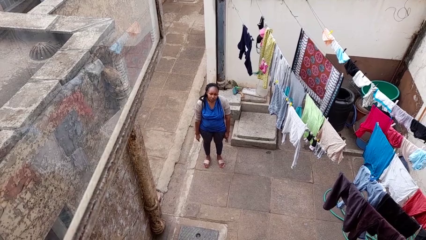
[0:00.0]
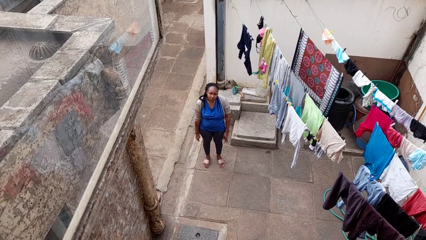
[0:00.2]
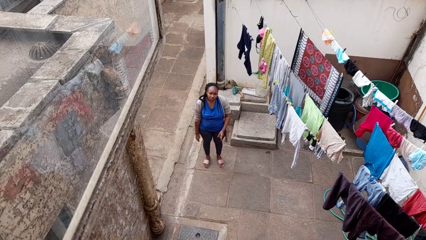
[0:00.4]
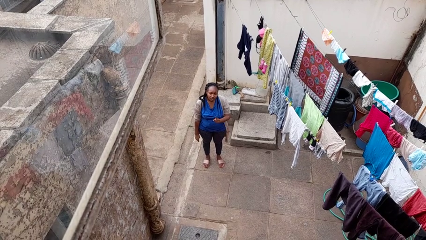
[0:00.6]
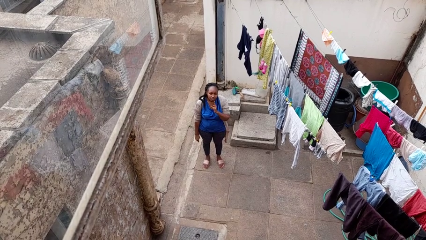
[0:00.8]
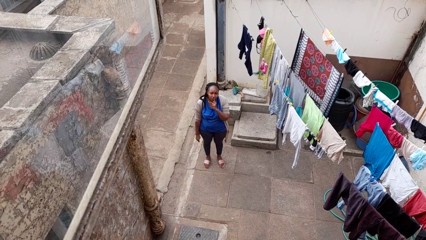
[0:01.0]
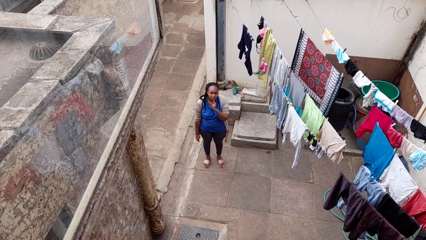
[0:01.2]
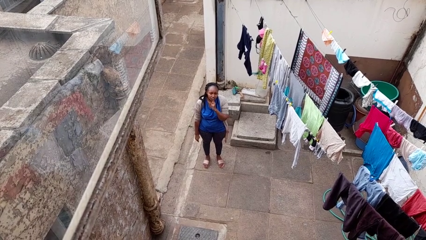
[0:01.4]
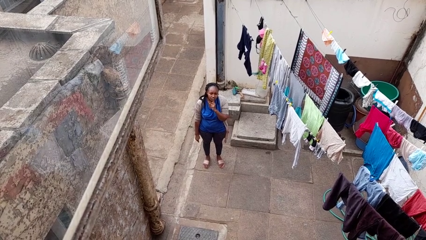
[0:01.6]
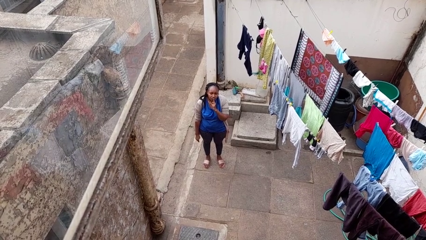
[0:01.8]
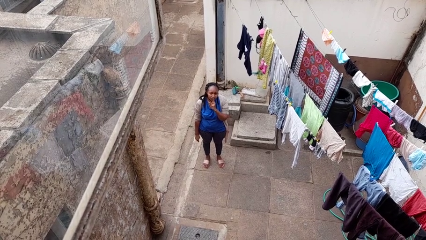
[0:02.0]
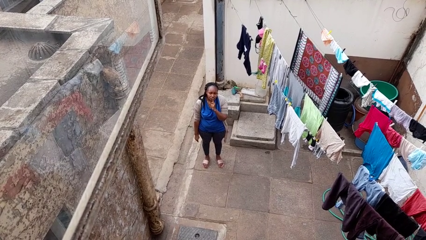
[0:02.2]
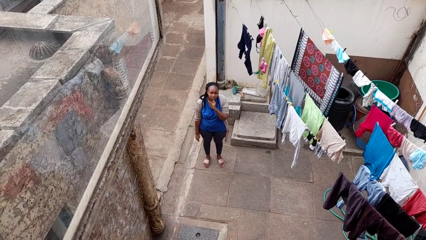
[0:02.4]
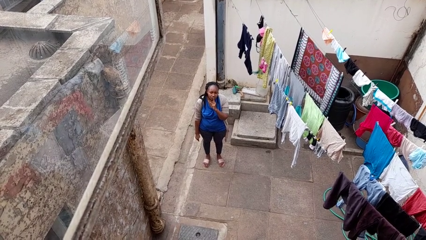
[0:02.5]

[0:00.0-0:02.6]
person gestures be quiet

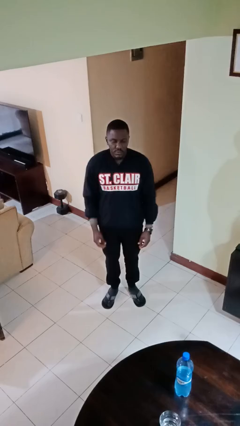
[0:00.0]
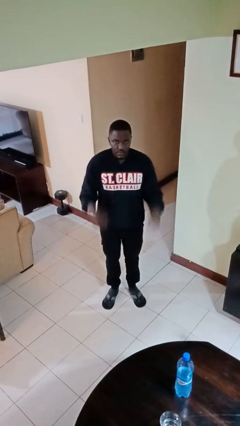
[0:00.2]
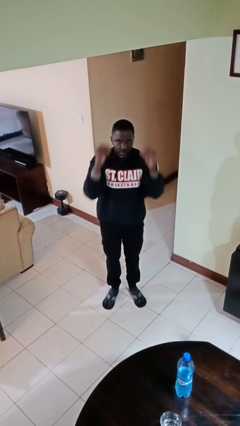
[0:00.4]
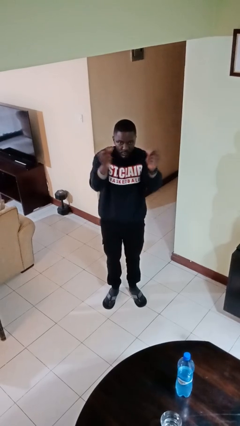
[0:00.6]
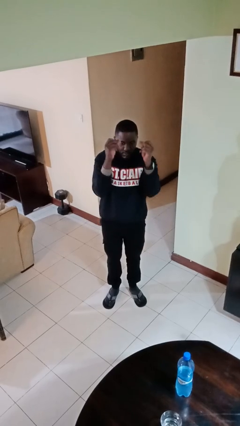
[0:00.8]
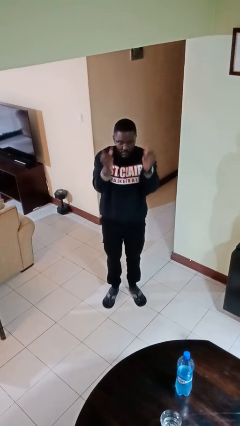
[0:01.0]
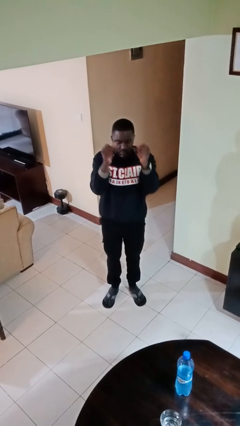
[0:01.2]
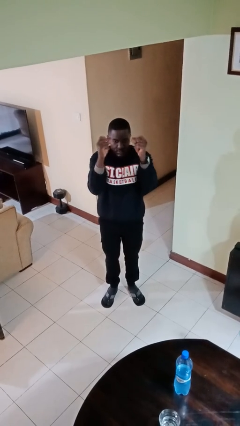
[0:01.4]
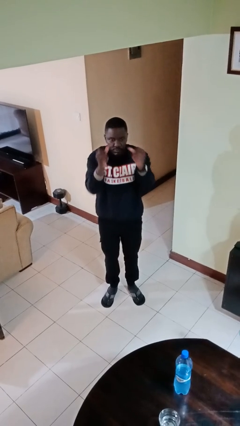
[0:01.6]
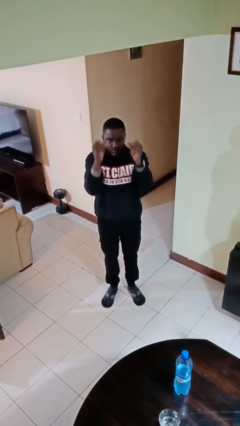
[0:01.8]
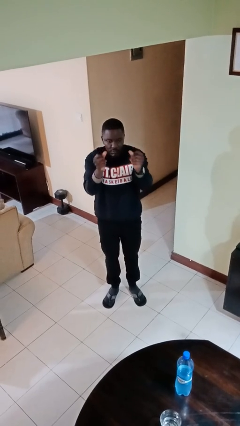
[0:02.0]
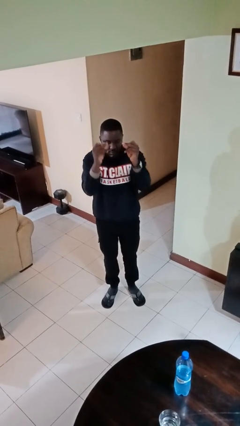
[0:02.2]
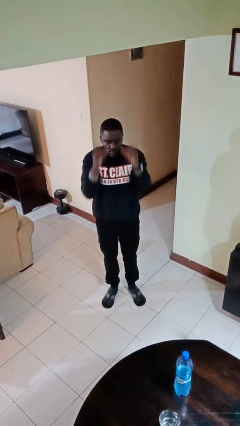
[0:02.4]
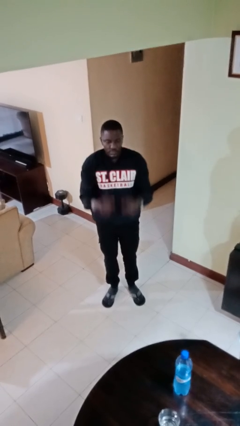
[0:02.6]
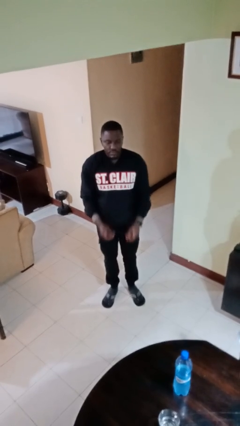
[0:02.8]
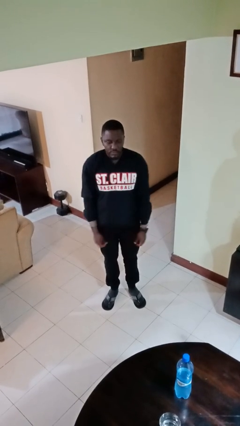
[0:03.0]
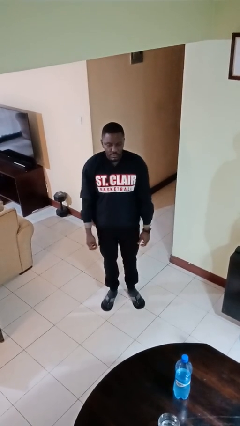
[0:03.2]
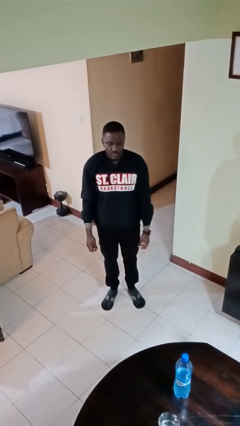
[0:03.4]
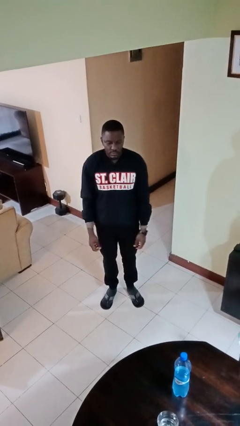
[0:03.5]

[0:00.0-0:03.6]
person snaps fingers

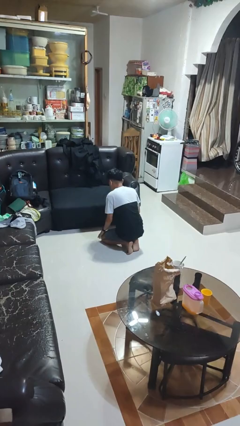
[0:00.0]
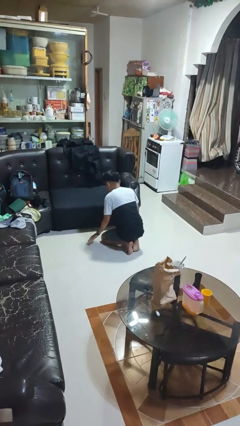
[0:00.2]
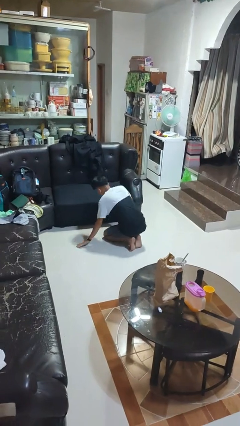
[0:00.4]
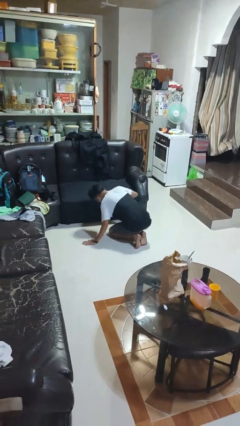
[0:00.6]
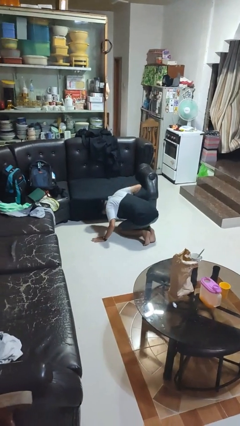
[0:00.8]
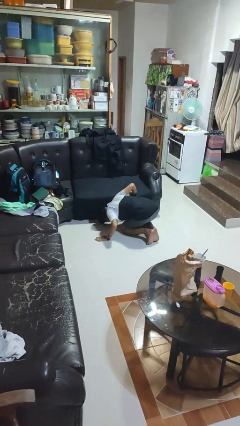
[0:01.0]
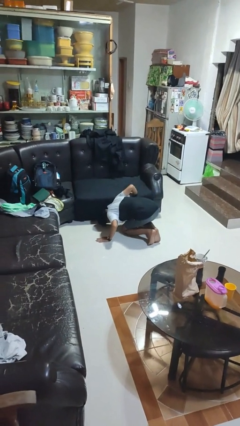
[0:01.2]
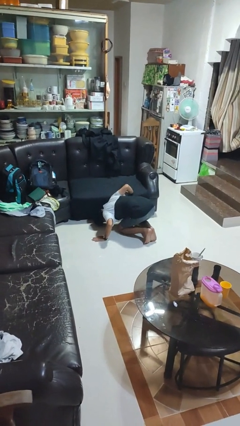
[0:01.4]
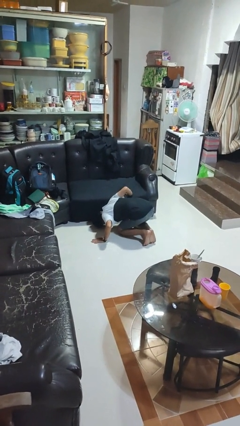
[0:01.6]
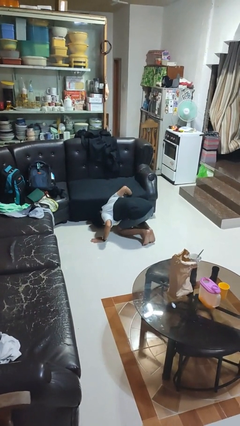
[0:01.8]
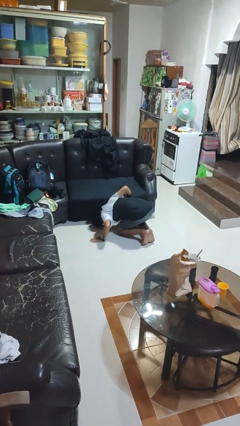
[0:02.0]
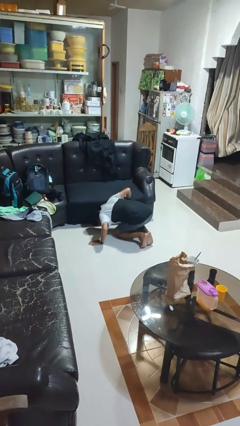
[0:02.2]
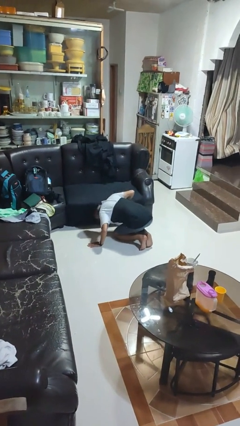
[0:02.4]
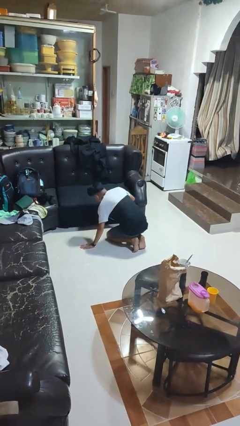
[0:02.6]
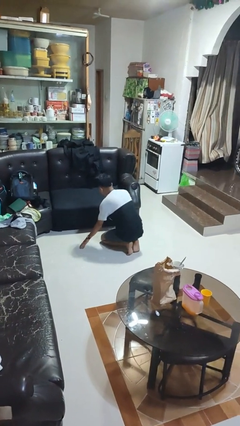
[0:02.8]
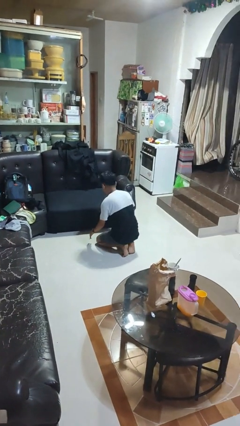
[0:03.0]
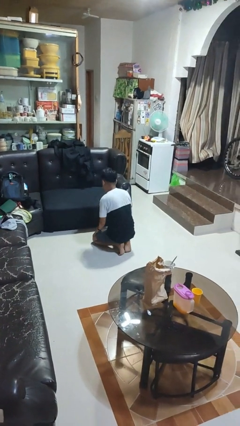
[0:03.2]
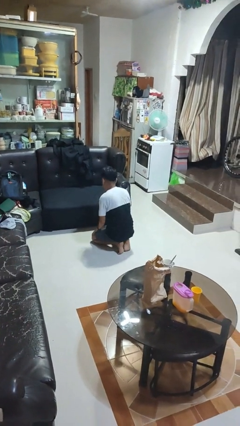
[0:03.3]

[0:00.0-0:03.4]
person searches under couch

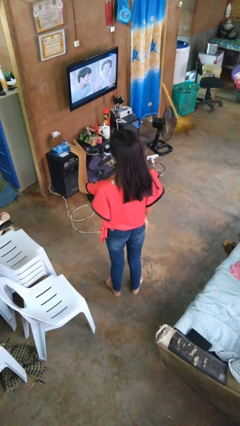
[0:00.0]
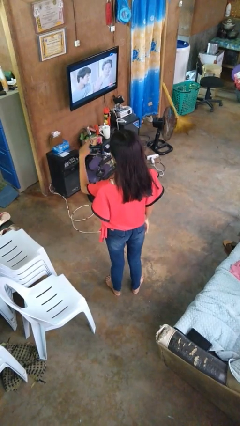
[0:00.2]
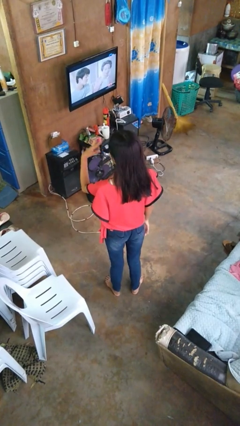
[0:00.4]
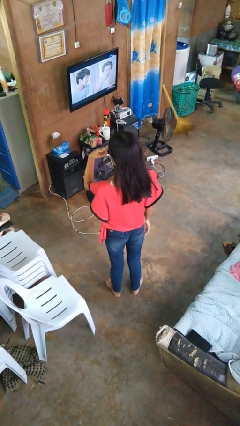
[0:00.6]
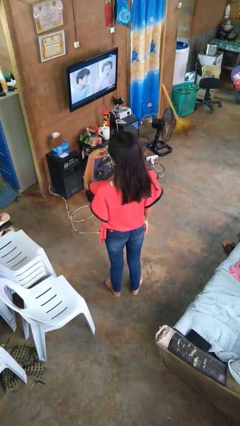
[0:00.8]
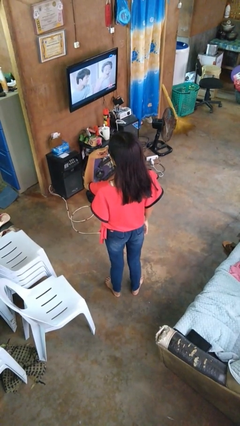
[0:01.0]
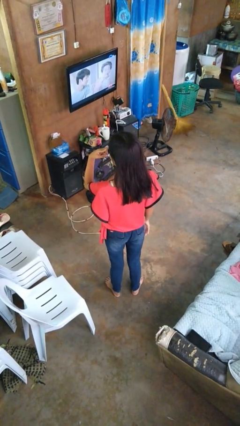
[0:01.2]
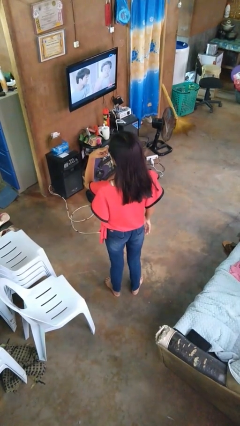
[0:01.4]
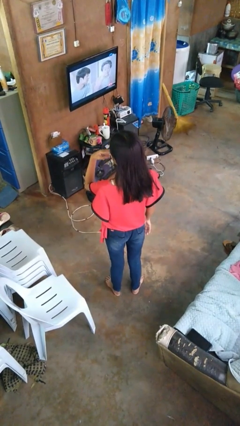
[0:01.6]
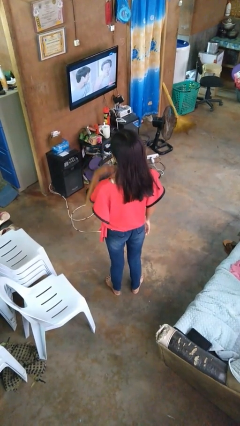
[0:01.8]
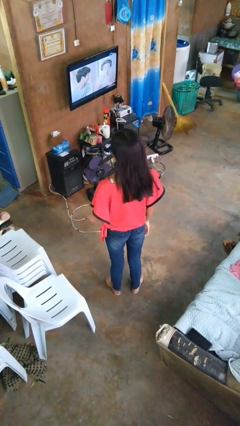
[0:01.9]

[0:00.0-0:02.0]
person gestures watch closely

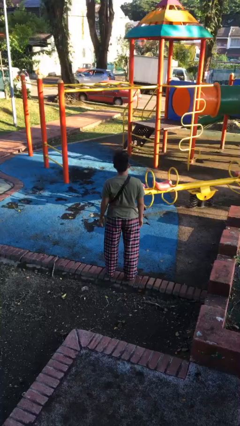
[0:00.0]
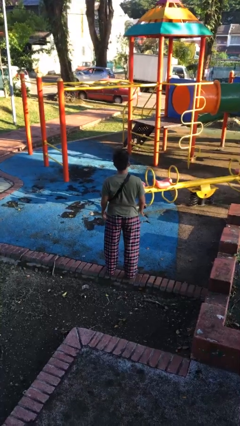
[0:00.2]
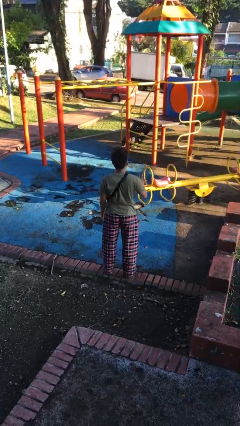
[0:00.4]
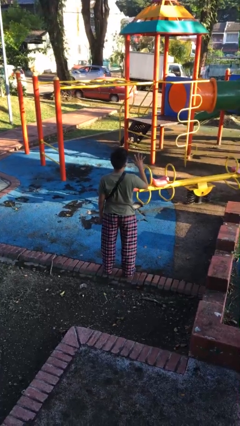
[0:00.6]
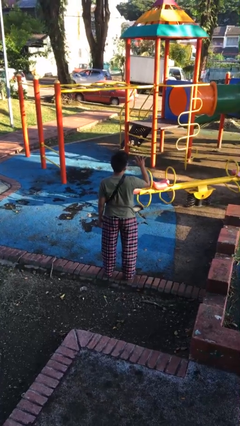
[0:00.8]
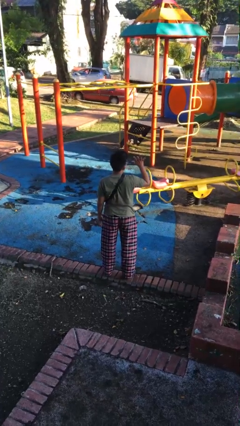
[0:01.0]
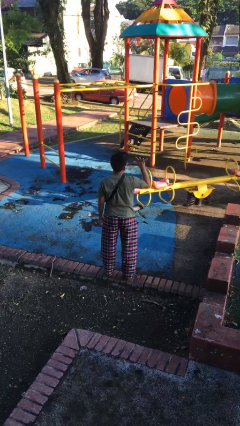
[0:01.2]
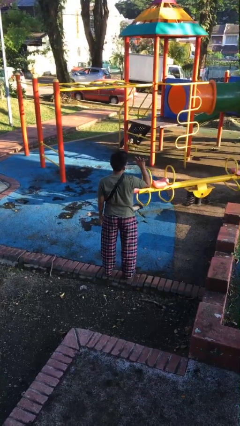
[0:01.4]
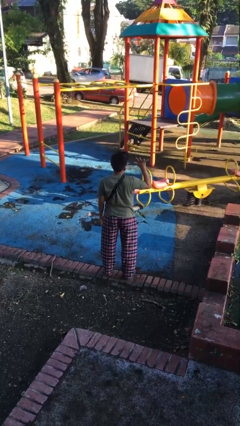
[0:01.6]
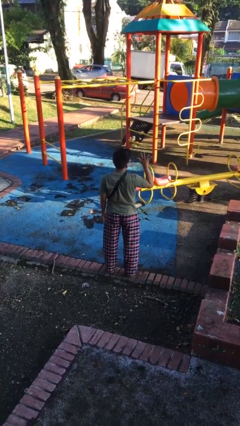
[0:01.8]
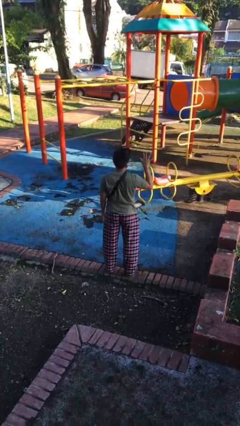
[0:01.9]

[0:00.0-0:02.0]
person gestures number five

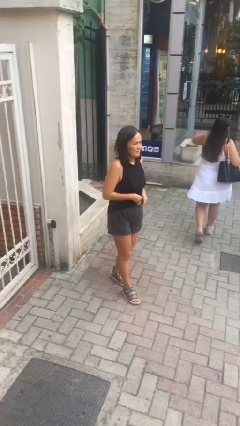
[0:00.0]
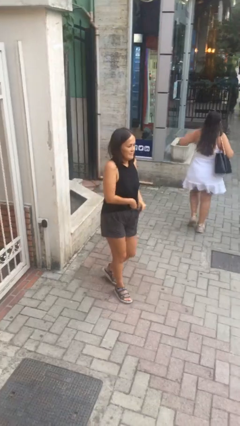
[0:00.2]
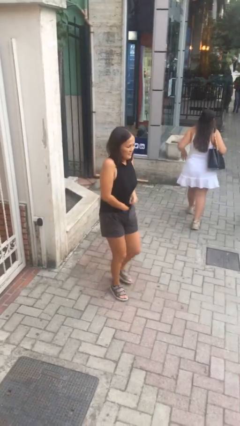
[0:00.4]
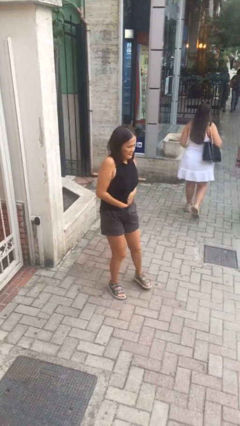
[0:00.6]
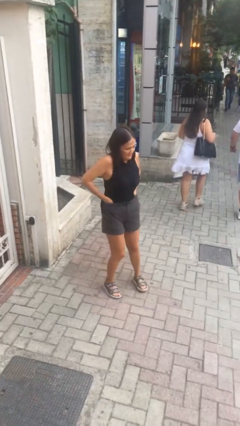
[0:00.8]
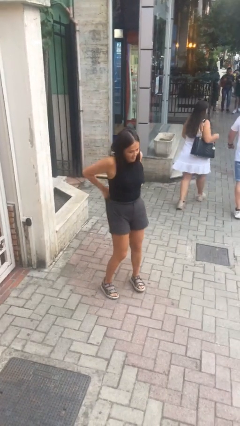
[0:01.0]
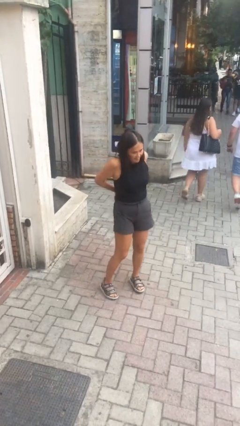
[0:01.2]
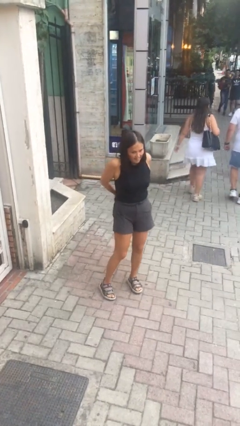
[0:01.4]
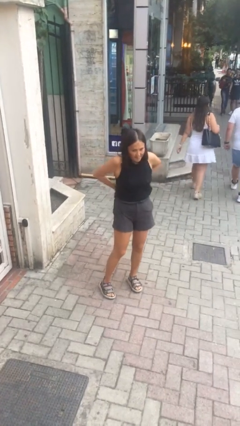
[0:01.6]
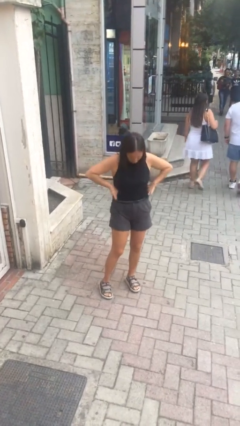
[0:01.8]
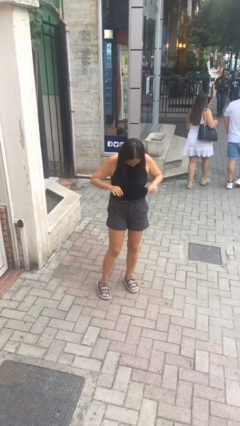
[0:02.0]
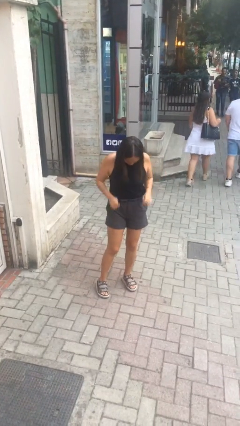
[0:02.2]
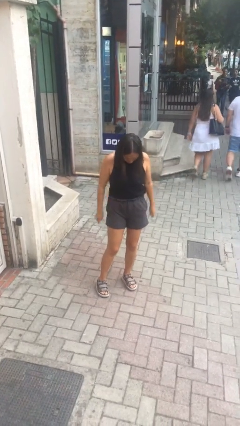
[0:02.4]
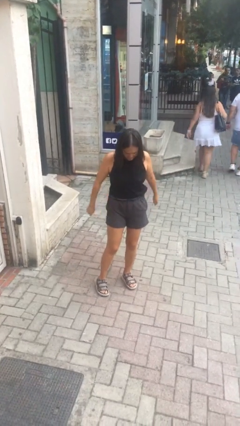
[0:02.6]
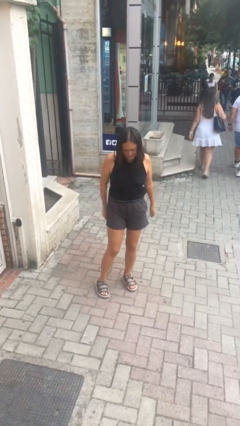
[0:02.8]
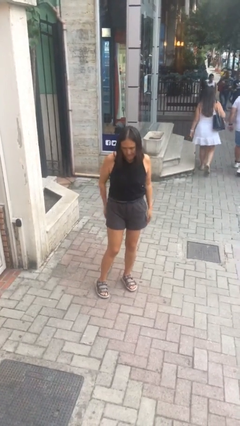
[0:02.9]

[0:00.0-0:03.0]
person tucks in shirt

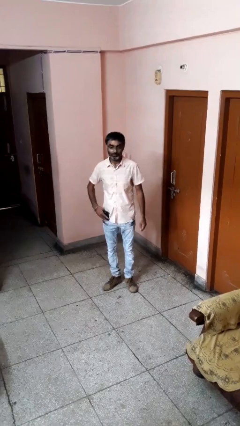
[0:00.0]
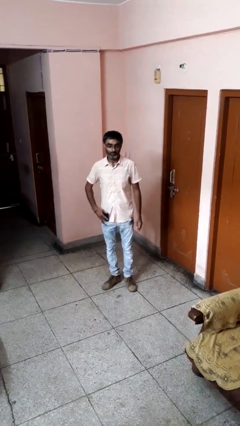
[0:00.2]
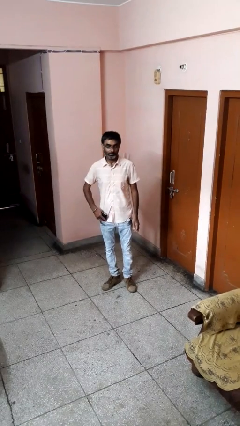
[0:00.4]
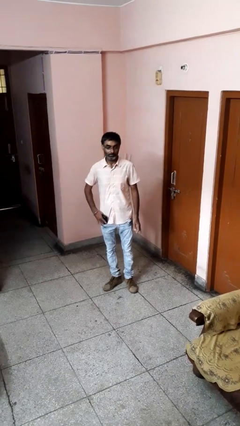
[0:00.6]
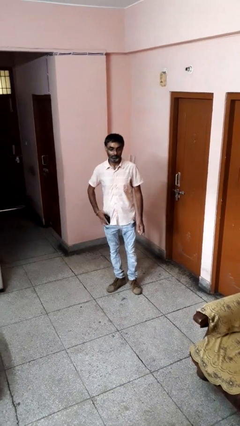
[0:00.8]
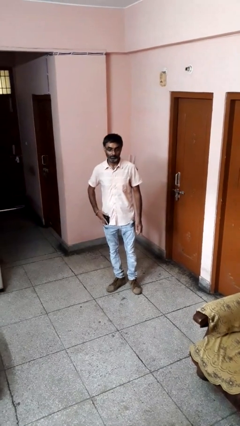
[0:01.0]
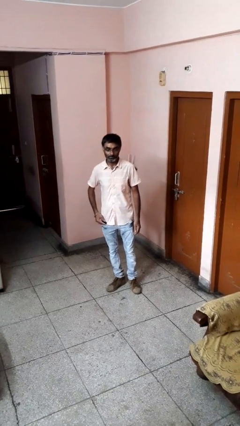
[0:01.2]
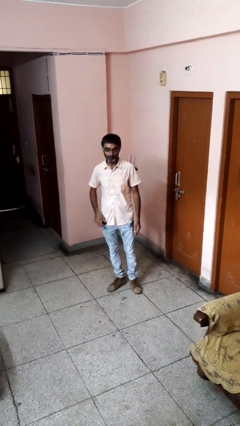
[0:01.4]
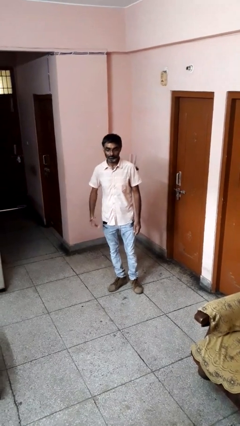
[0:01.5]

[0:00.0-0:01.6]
person puts phone into pocket
